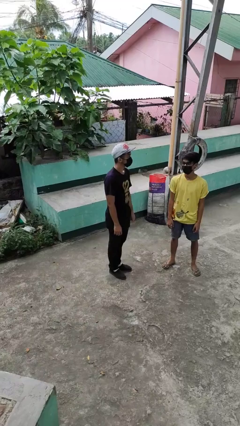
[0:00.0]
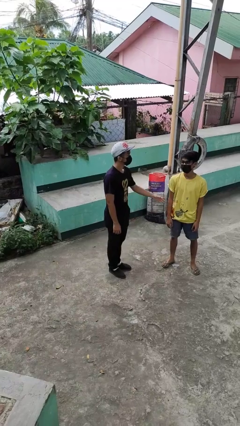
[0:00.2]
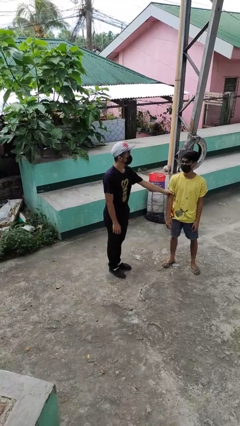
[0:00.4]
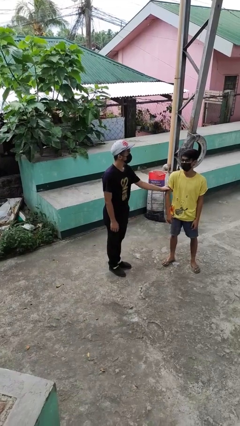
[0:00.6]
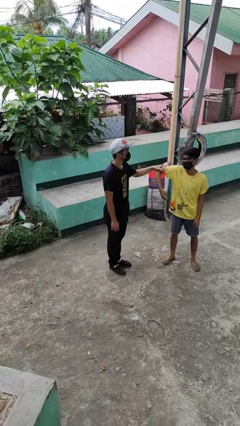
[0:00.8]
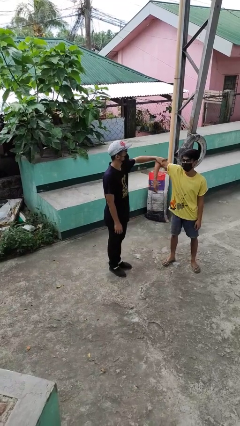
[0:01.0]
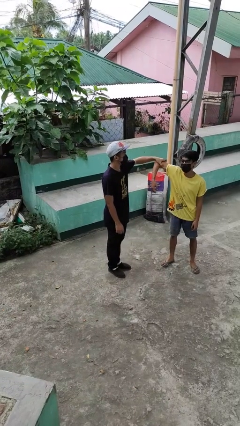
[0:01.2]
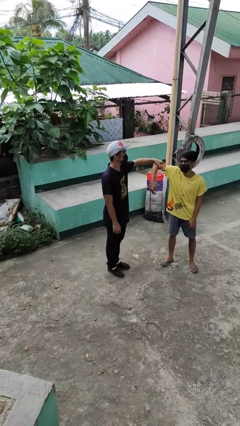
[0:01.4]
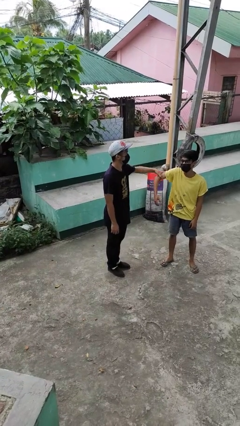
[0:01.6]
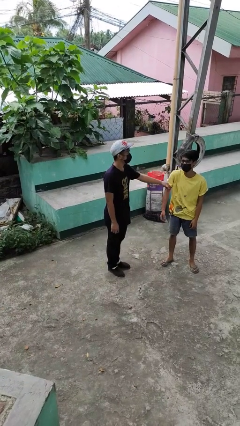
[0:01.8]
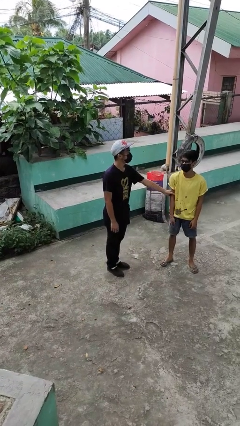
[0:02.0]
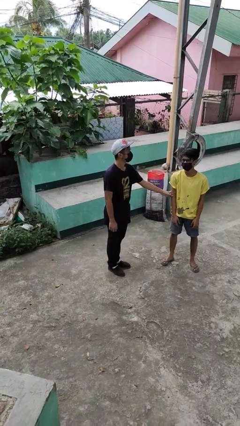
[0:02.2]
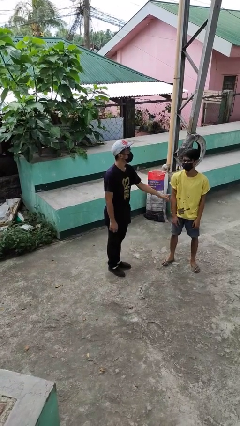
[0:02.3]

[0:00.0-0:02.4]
person grabs person by bicep

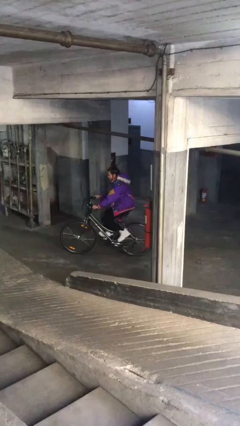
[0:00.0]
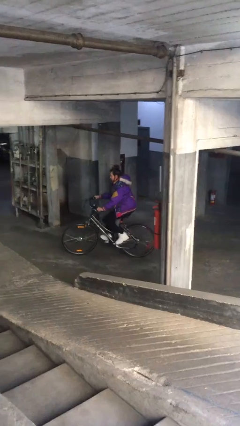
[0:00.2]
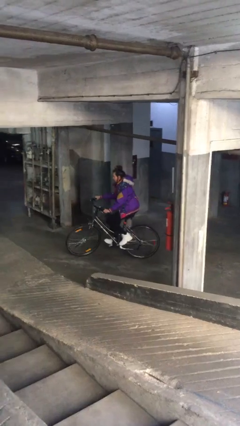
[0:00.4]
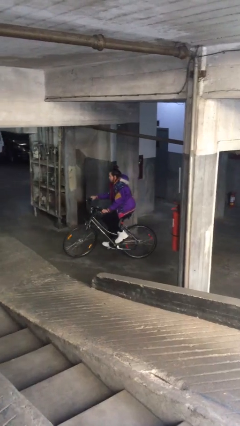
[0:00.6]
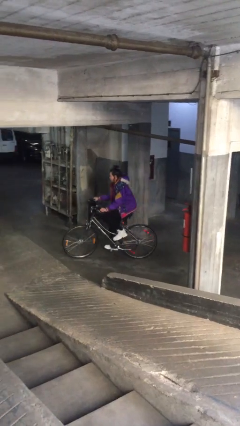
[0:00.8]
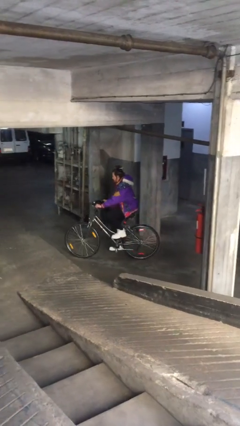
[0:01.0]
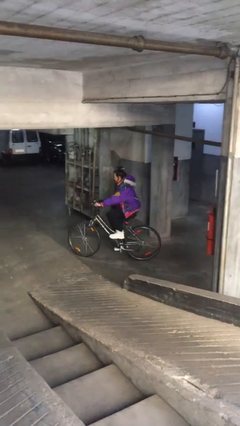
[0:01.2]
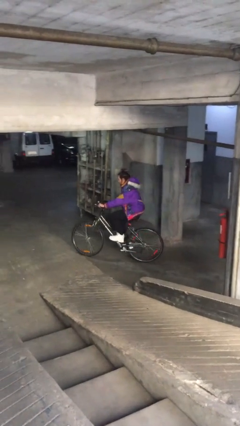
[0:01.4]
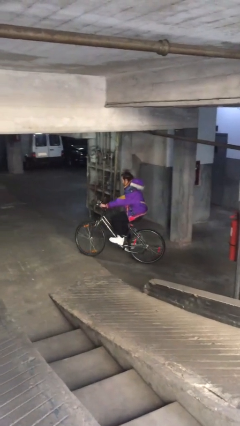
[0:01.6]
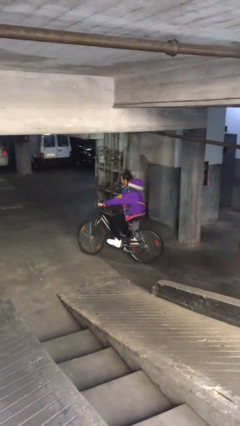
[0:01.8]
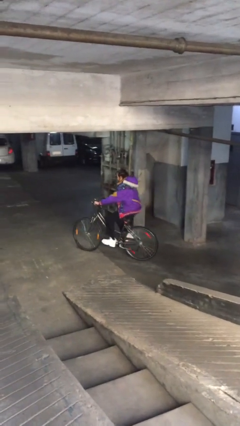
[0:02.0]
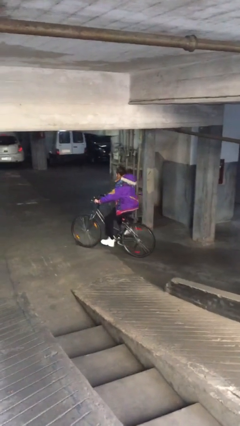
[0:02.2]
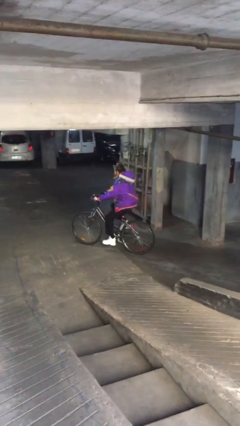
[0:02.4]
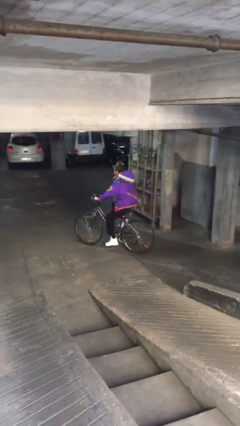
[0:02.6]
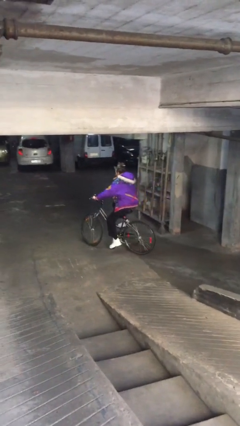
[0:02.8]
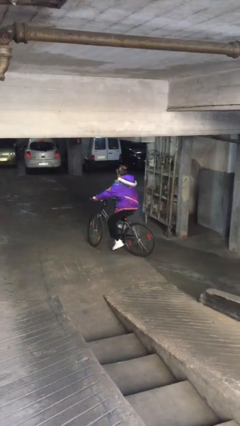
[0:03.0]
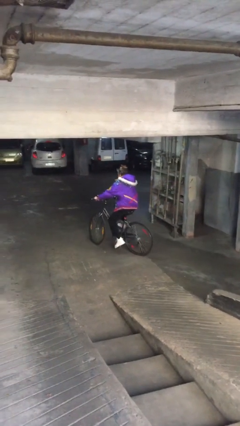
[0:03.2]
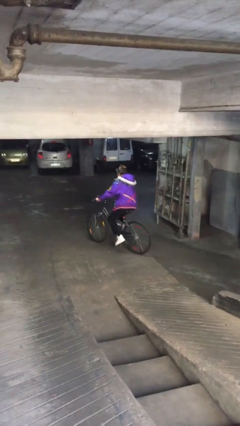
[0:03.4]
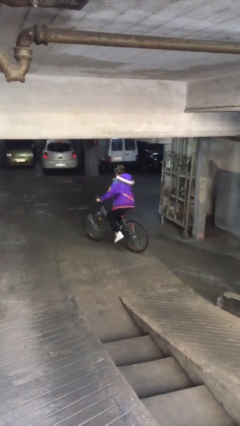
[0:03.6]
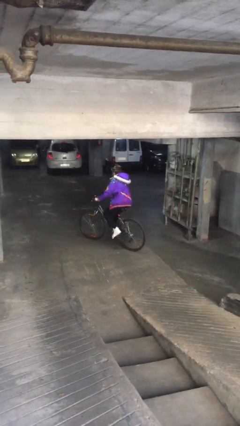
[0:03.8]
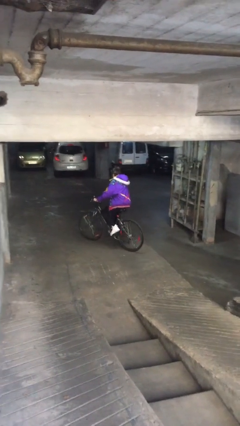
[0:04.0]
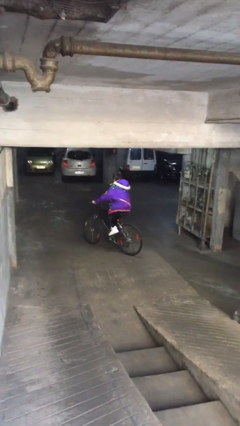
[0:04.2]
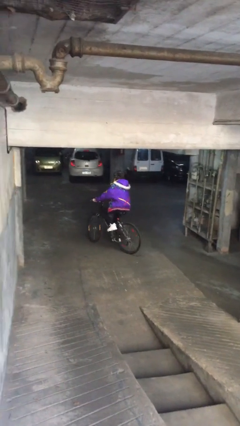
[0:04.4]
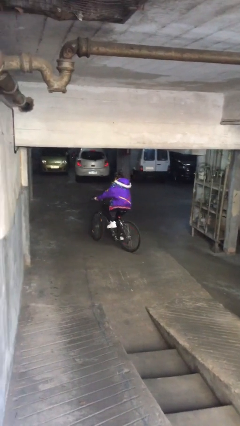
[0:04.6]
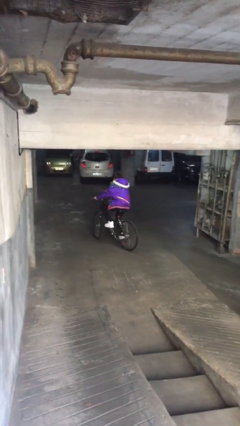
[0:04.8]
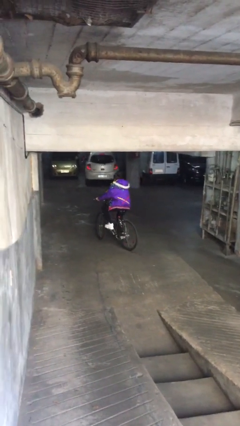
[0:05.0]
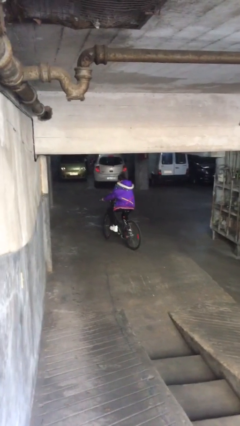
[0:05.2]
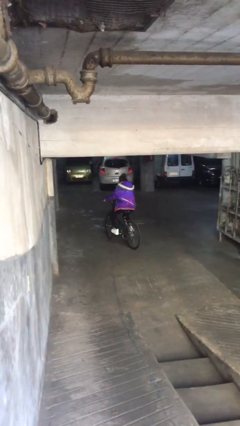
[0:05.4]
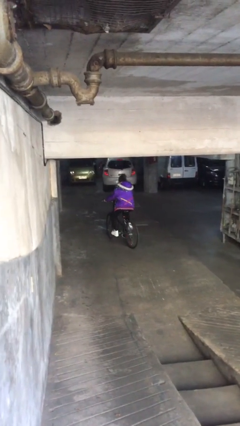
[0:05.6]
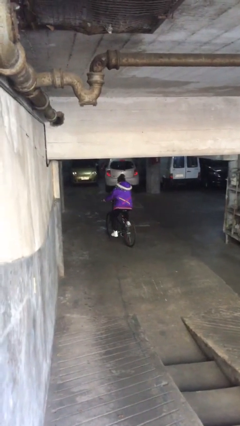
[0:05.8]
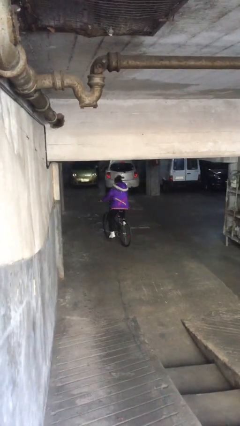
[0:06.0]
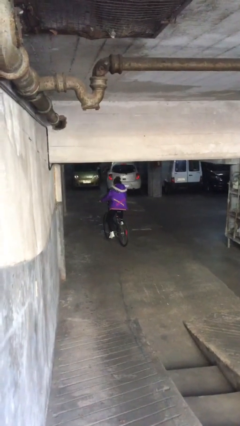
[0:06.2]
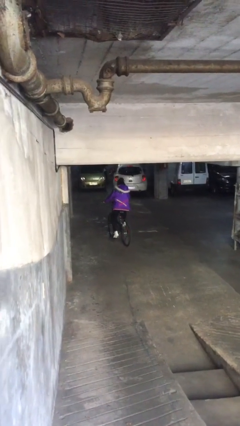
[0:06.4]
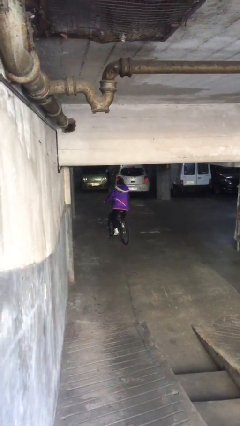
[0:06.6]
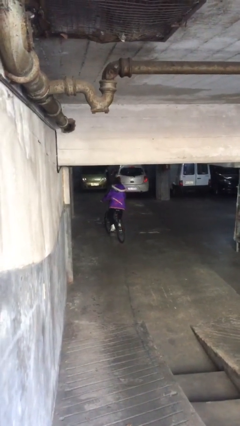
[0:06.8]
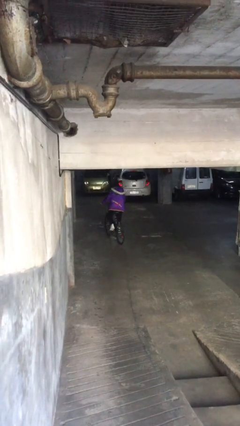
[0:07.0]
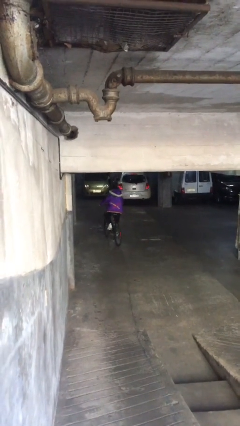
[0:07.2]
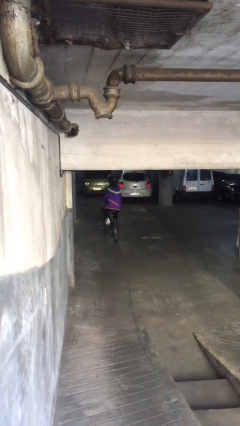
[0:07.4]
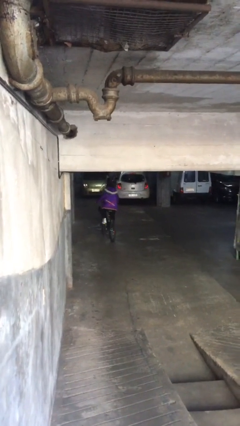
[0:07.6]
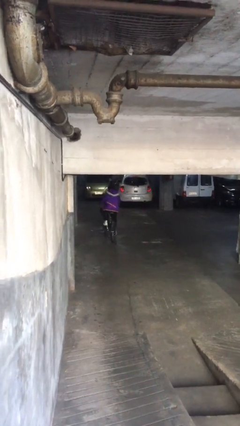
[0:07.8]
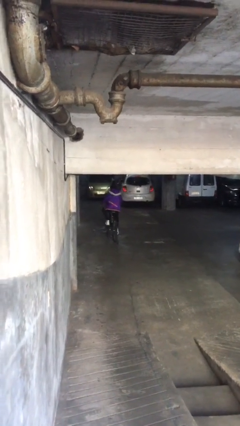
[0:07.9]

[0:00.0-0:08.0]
person rides bicycle

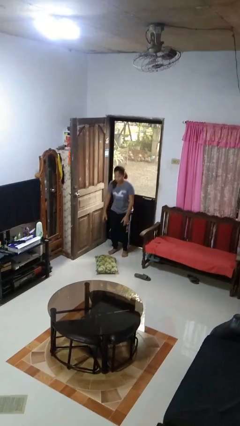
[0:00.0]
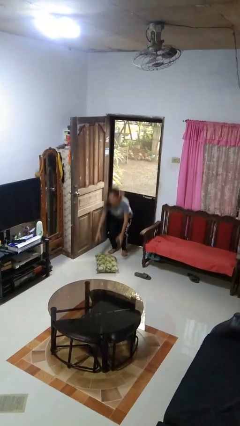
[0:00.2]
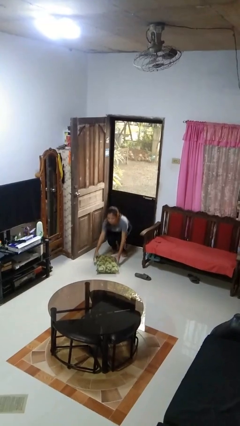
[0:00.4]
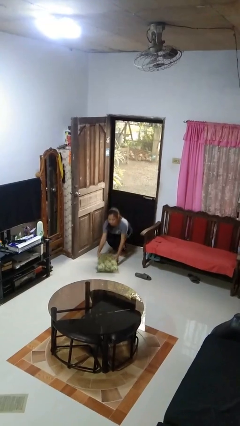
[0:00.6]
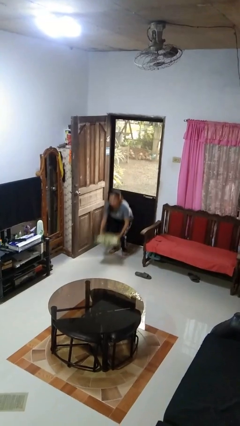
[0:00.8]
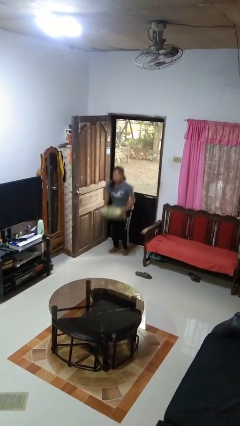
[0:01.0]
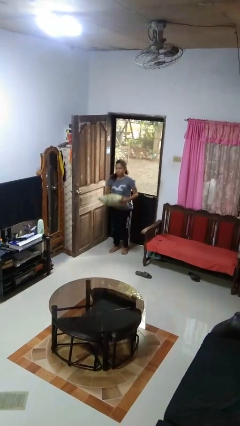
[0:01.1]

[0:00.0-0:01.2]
person picks up object from floor

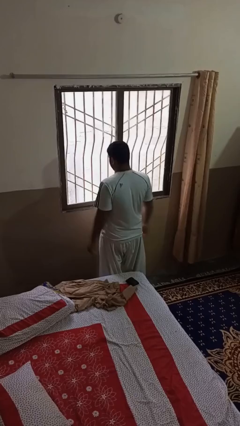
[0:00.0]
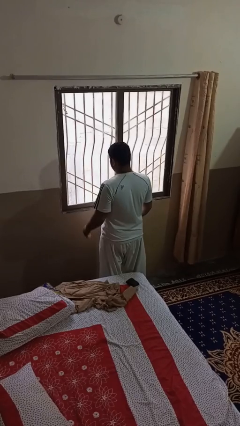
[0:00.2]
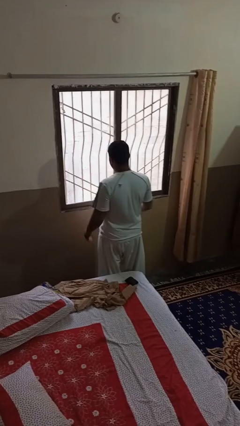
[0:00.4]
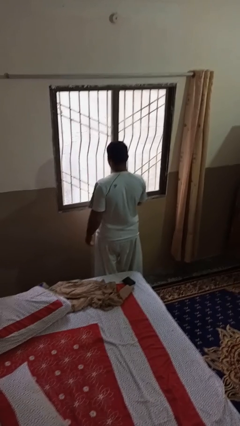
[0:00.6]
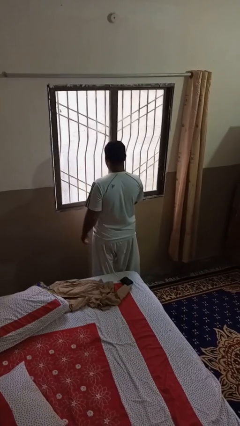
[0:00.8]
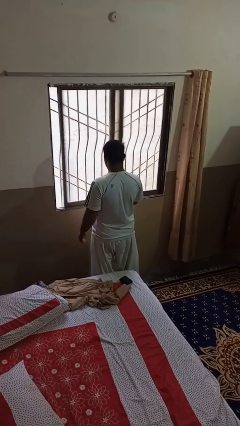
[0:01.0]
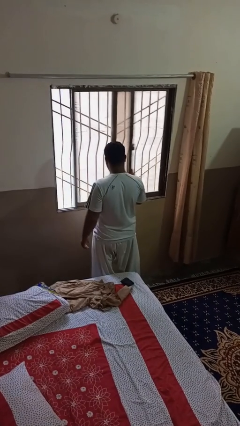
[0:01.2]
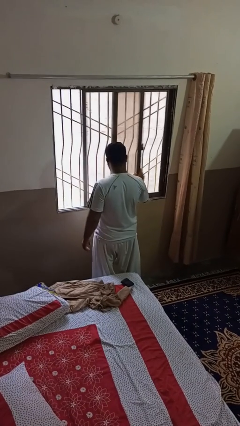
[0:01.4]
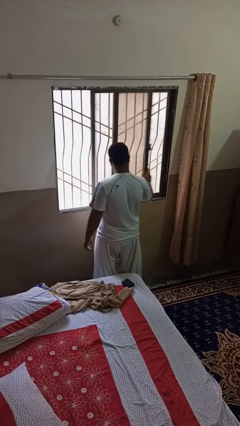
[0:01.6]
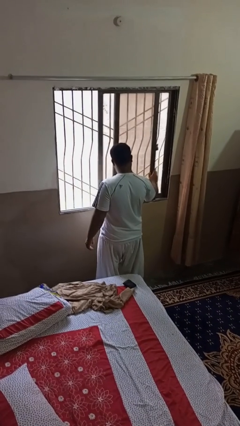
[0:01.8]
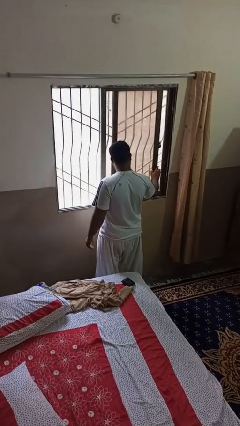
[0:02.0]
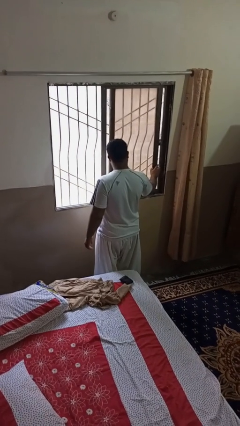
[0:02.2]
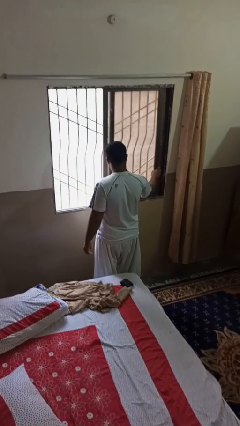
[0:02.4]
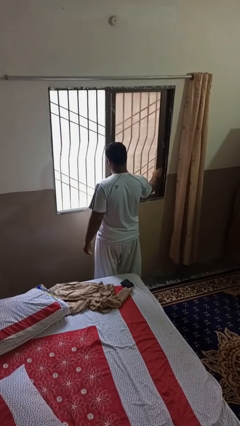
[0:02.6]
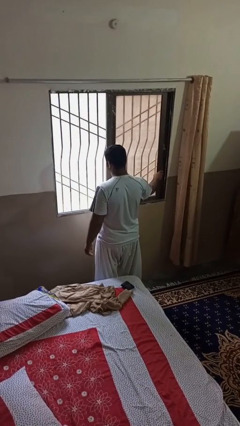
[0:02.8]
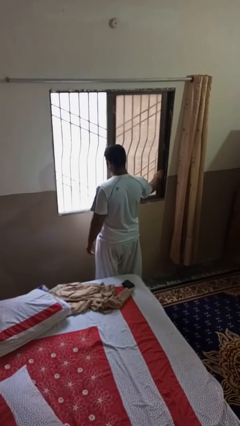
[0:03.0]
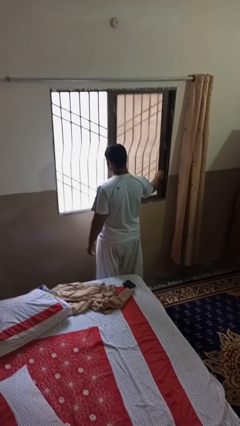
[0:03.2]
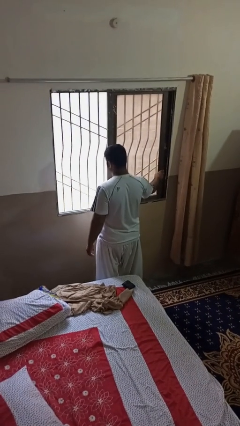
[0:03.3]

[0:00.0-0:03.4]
person opens home window

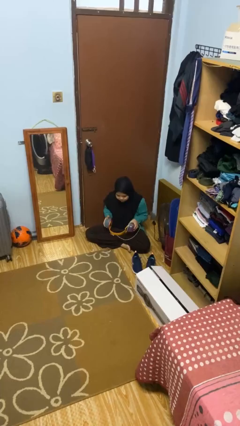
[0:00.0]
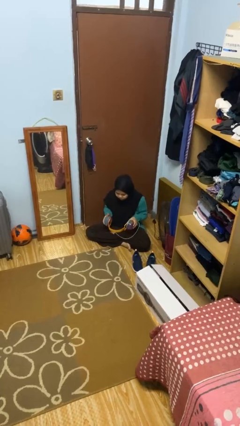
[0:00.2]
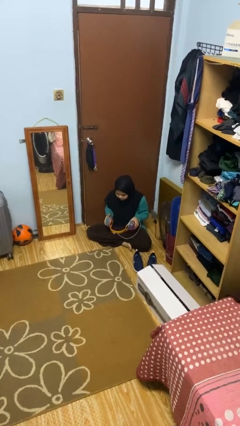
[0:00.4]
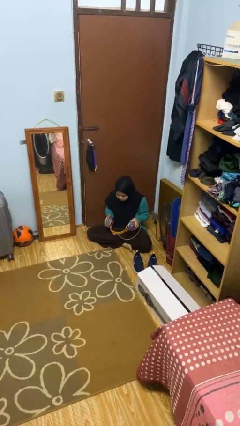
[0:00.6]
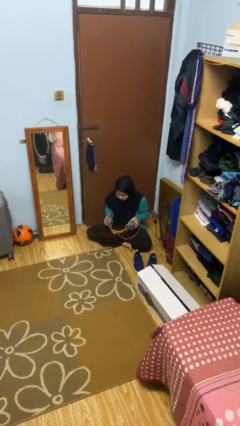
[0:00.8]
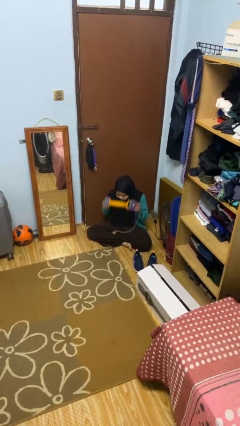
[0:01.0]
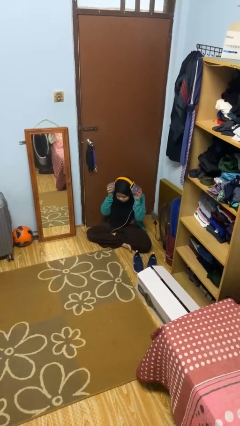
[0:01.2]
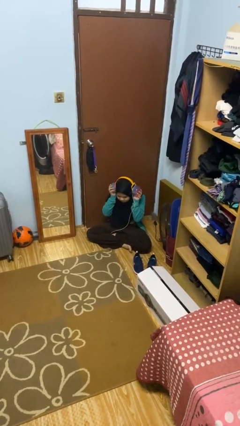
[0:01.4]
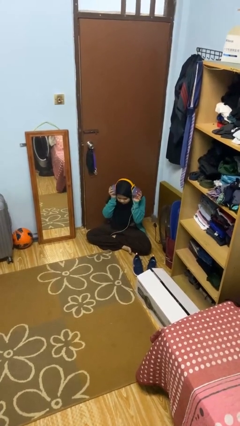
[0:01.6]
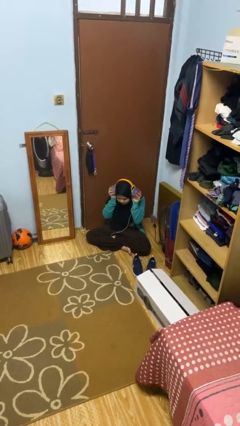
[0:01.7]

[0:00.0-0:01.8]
person puts on headphones

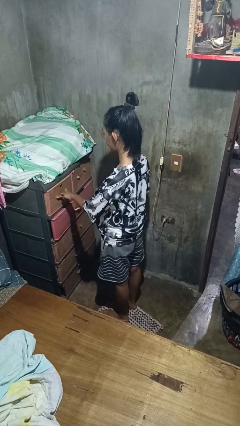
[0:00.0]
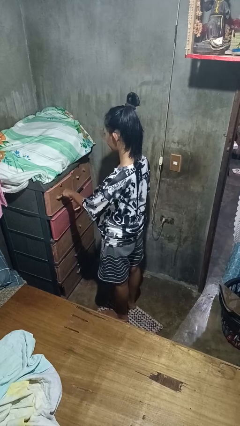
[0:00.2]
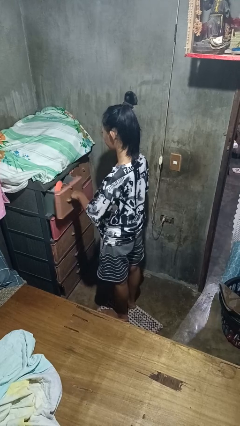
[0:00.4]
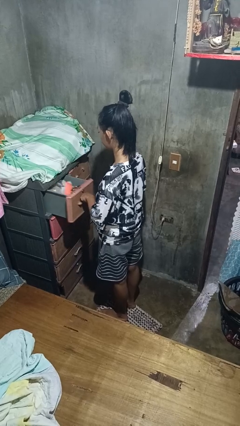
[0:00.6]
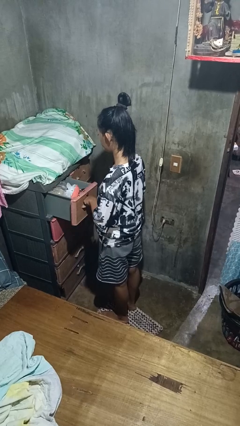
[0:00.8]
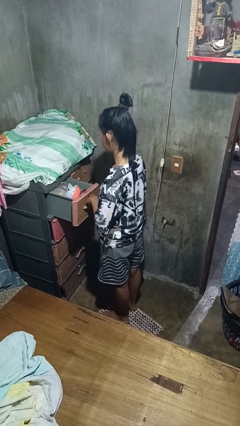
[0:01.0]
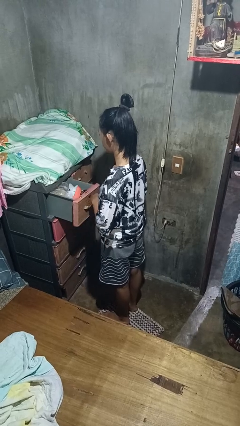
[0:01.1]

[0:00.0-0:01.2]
person opens dresser drawer
